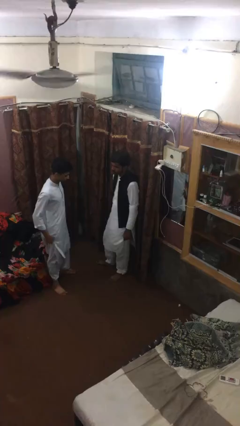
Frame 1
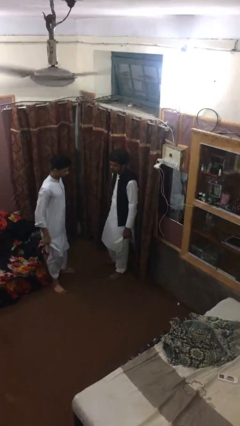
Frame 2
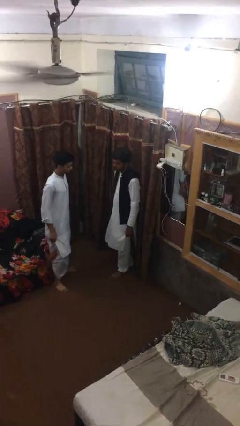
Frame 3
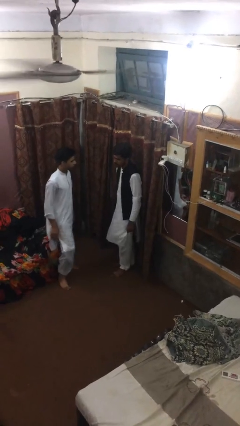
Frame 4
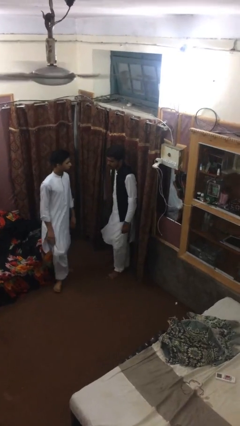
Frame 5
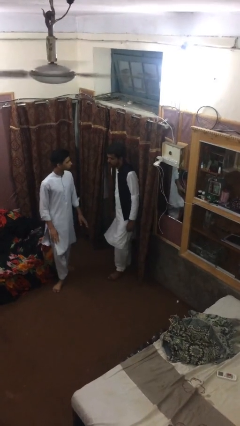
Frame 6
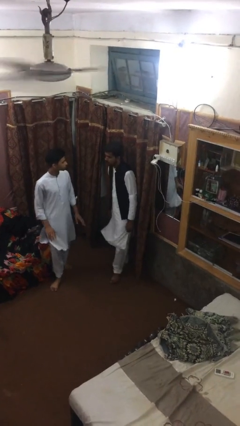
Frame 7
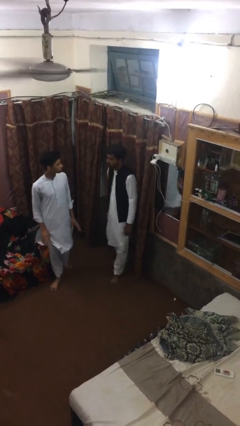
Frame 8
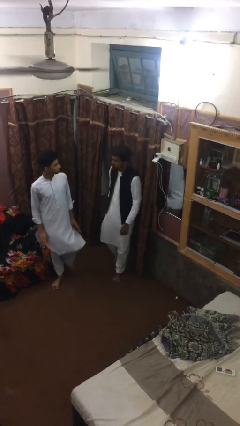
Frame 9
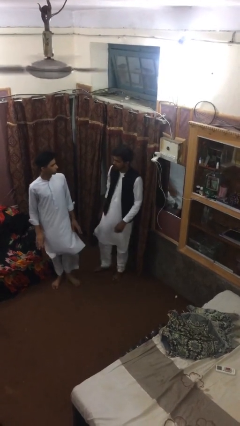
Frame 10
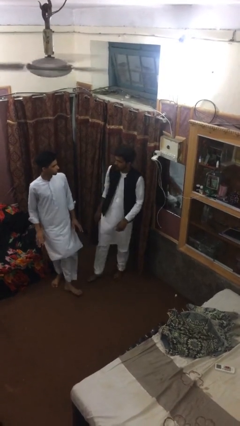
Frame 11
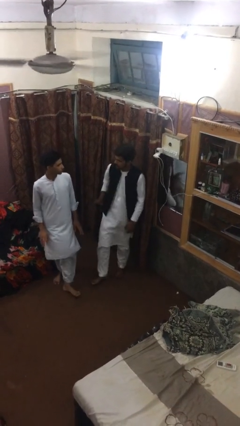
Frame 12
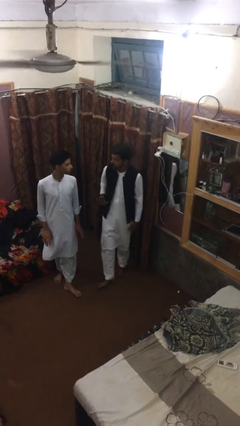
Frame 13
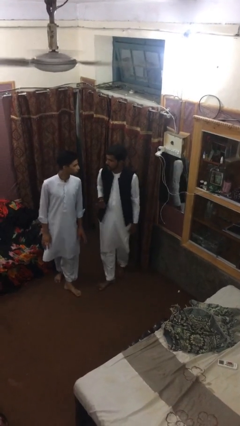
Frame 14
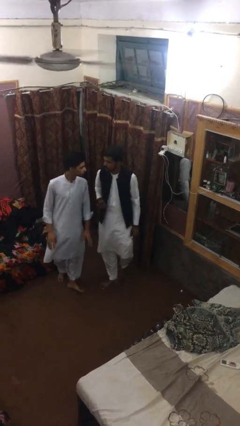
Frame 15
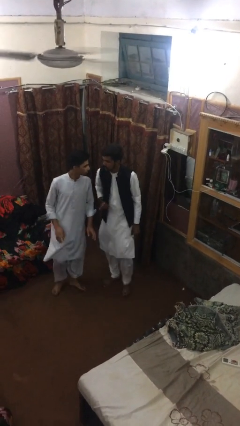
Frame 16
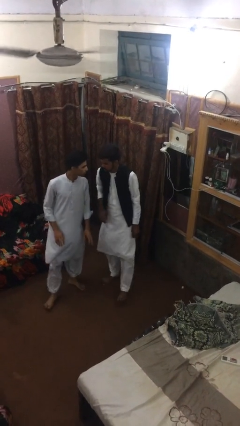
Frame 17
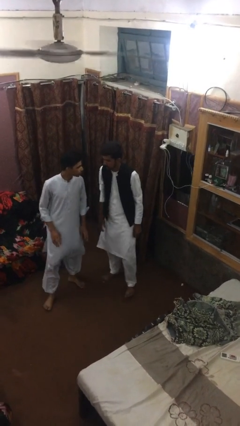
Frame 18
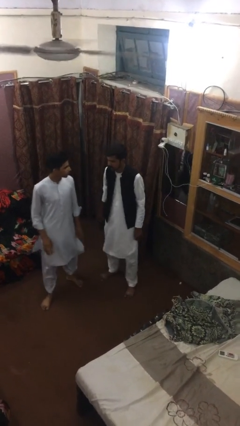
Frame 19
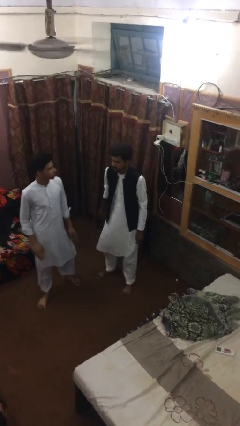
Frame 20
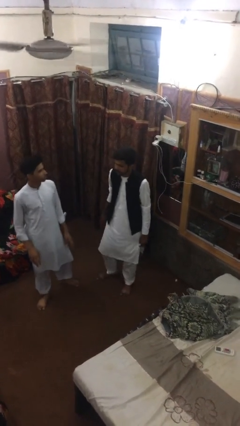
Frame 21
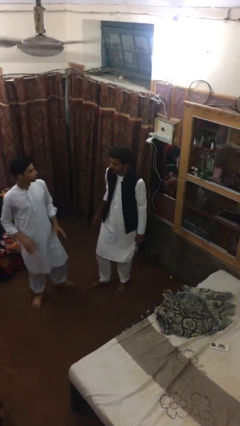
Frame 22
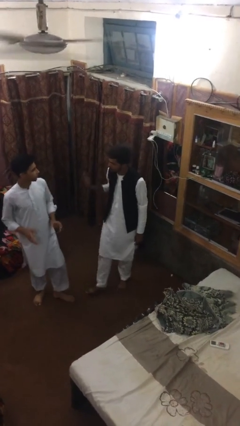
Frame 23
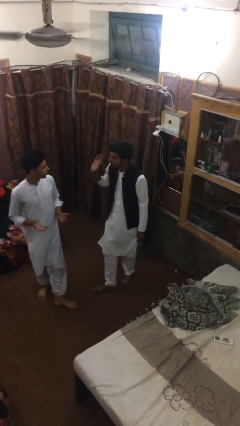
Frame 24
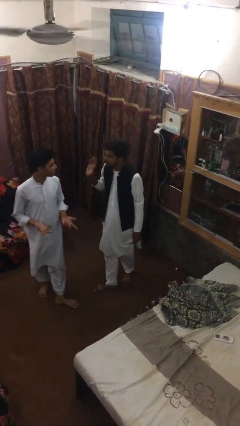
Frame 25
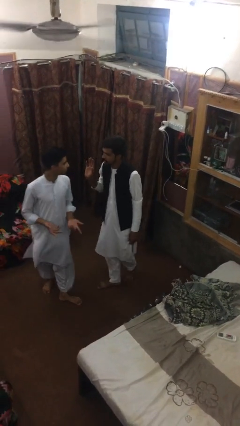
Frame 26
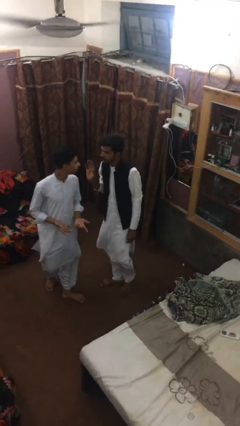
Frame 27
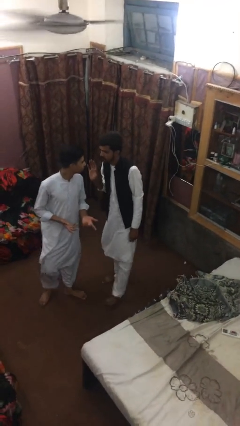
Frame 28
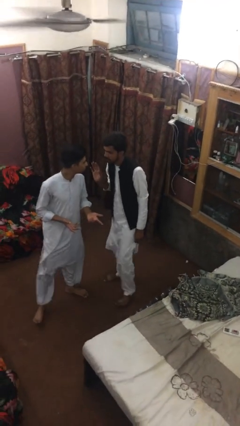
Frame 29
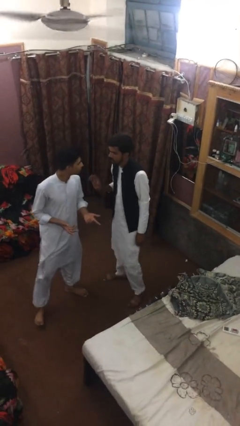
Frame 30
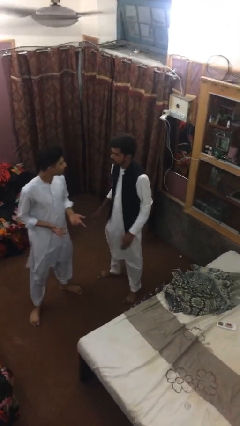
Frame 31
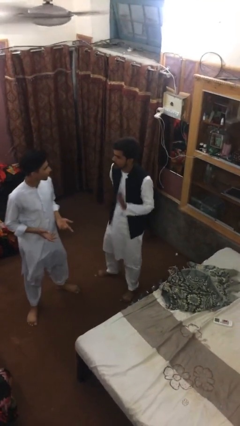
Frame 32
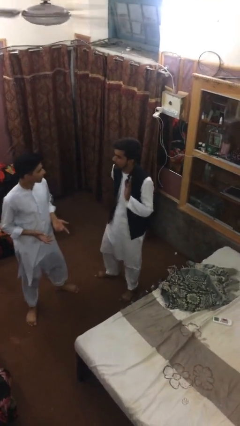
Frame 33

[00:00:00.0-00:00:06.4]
person talks to person

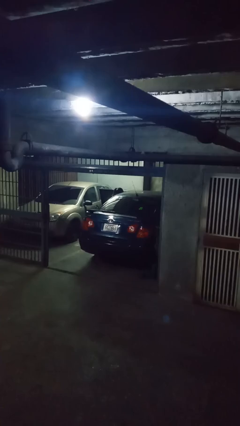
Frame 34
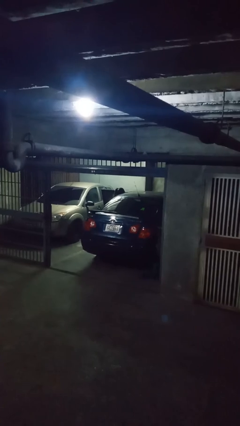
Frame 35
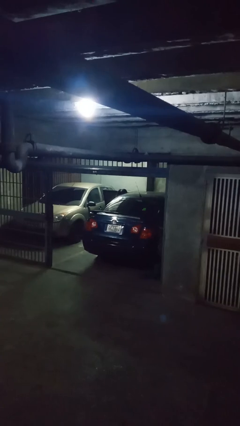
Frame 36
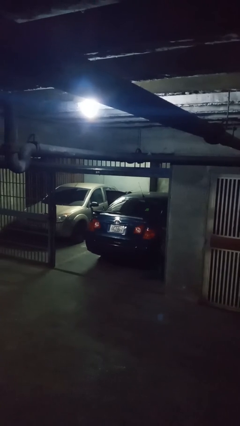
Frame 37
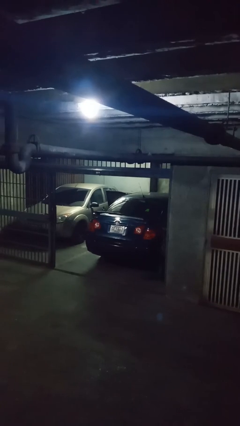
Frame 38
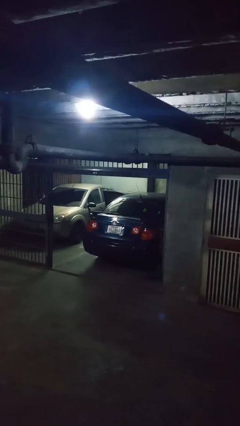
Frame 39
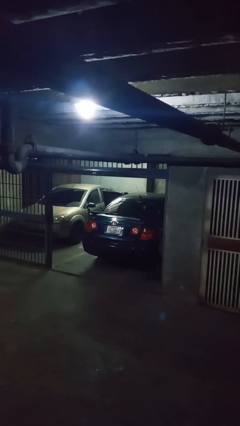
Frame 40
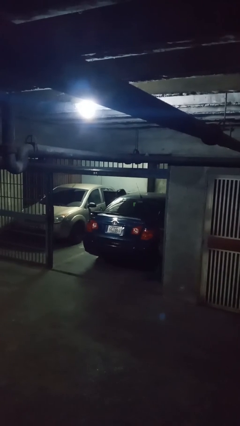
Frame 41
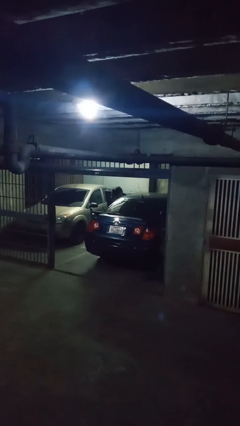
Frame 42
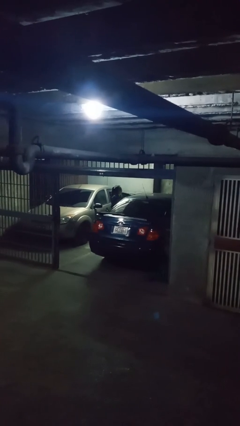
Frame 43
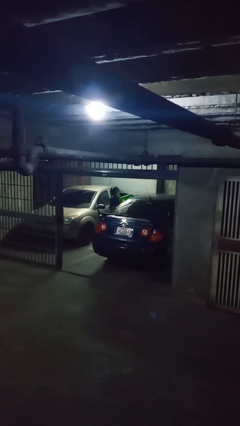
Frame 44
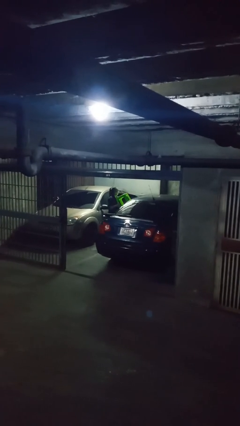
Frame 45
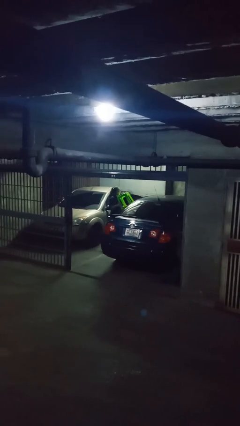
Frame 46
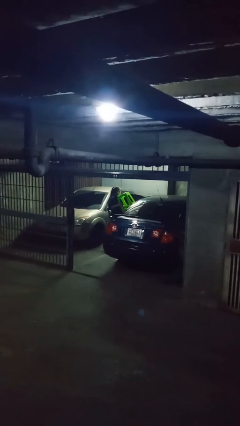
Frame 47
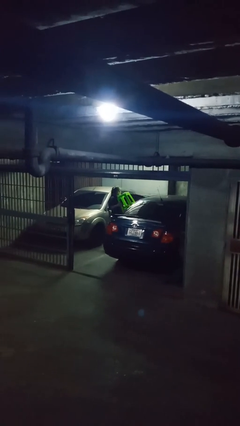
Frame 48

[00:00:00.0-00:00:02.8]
person unloads car

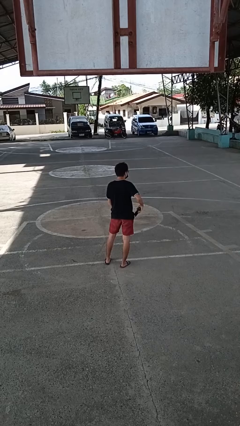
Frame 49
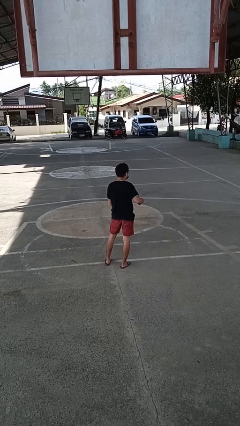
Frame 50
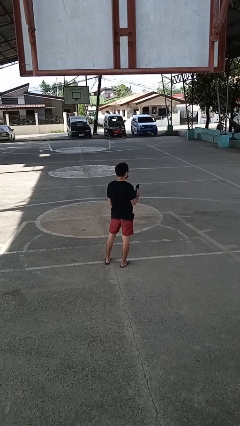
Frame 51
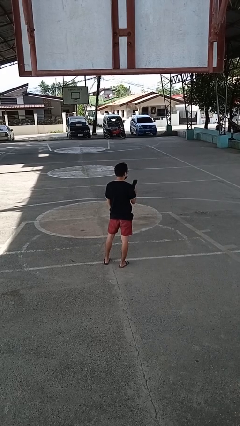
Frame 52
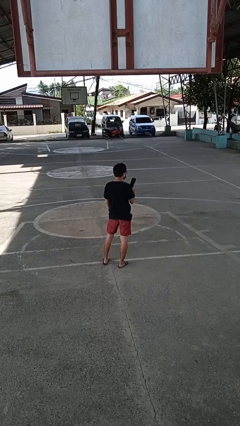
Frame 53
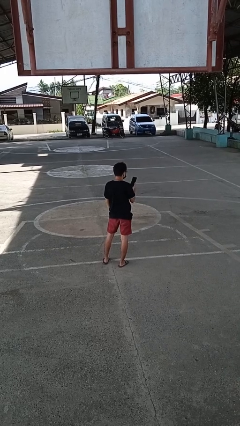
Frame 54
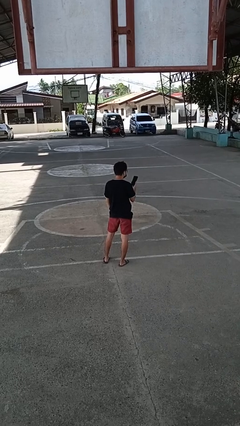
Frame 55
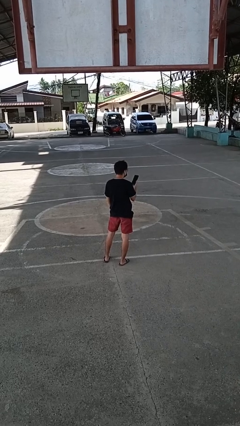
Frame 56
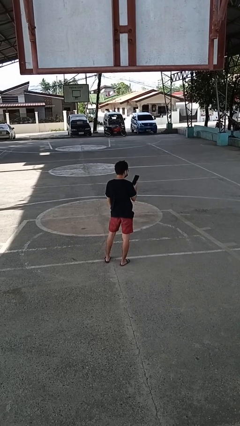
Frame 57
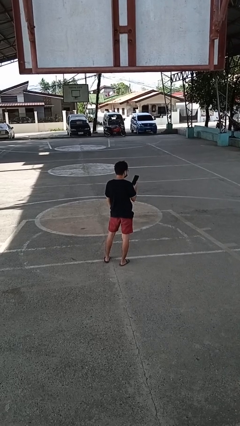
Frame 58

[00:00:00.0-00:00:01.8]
person takes phone from pocket

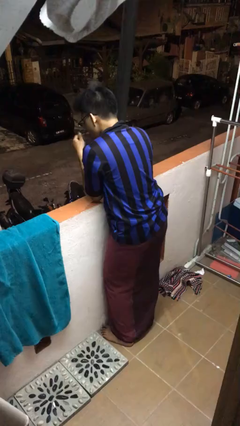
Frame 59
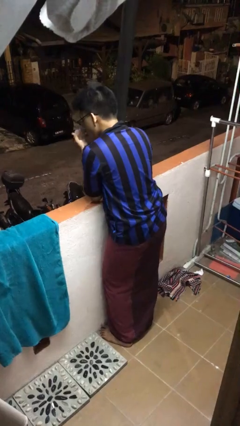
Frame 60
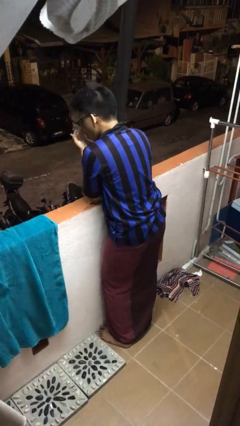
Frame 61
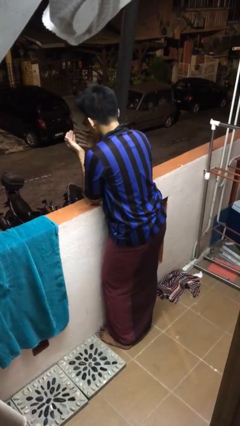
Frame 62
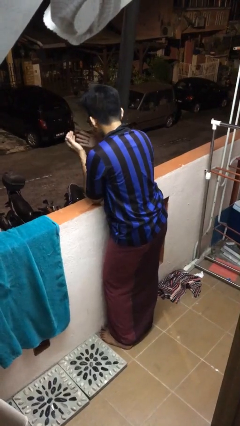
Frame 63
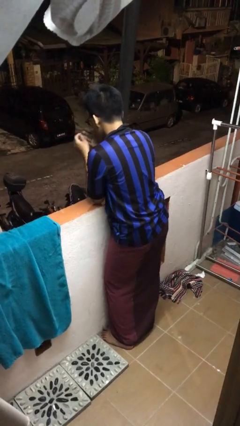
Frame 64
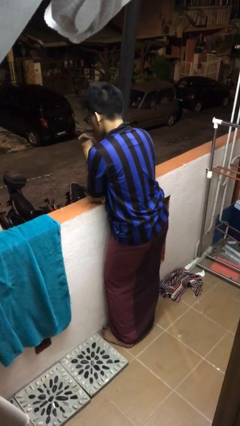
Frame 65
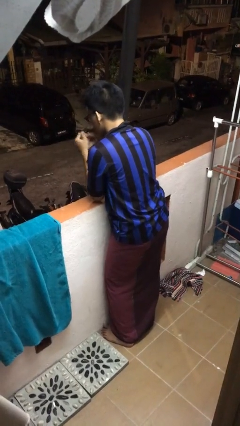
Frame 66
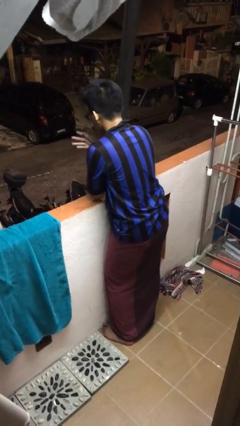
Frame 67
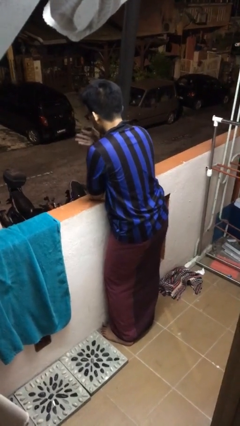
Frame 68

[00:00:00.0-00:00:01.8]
person blows into hands

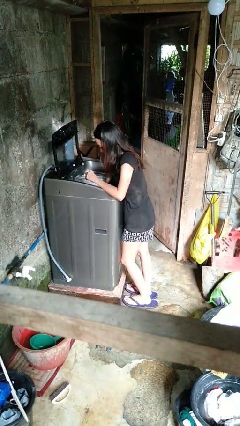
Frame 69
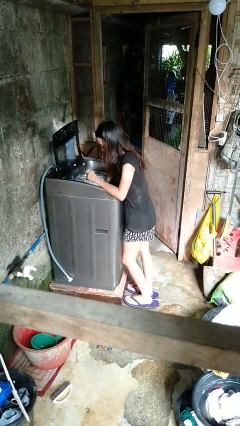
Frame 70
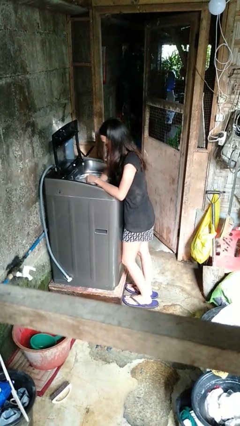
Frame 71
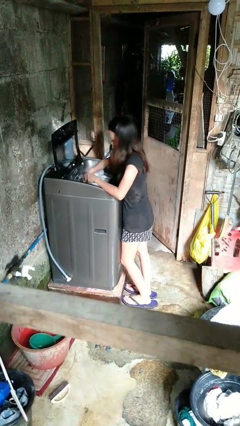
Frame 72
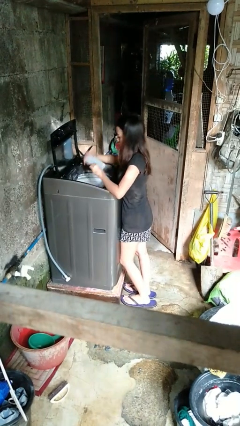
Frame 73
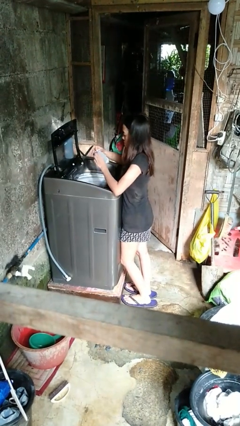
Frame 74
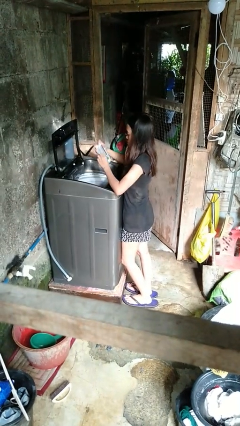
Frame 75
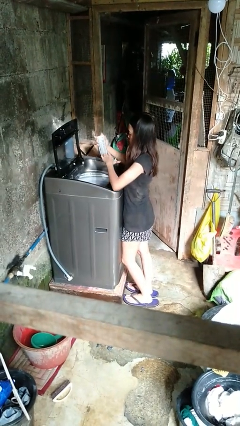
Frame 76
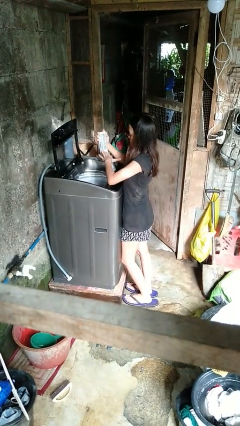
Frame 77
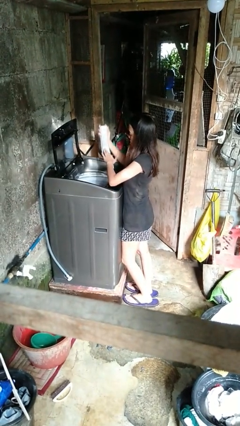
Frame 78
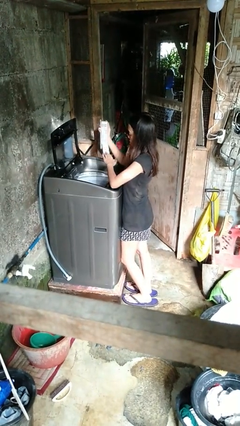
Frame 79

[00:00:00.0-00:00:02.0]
person cleans dryer lint trap

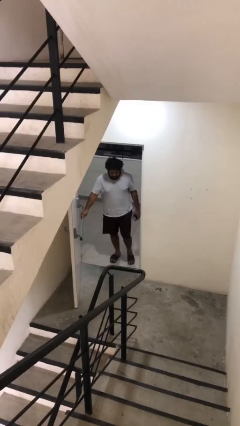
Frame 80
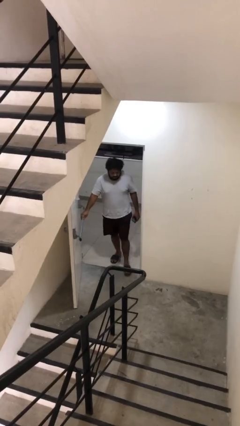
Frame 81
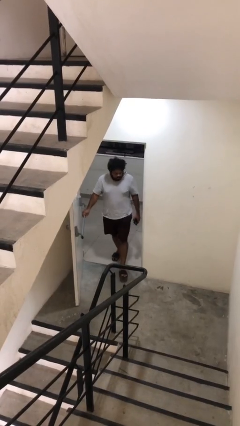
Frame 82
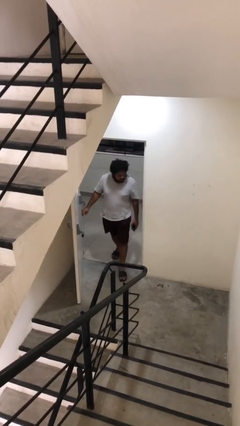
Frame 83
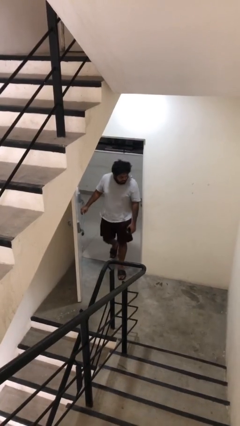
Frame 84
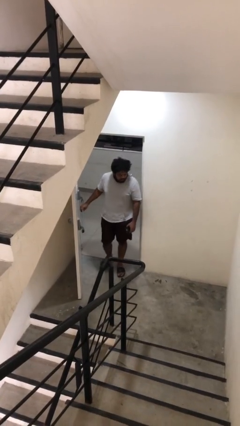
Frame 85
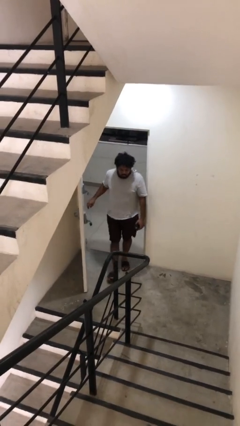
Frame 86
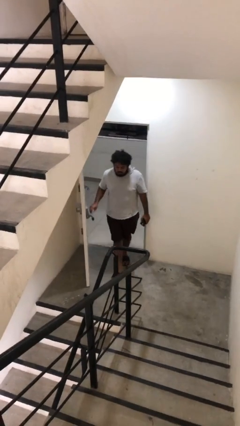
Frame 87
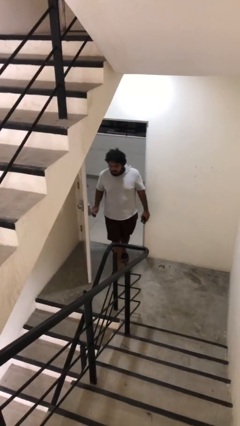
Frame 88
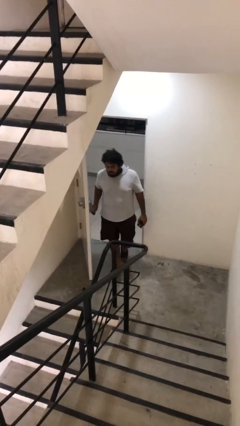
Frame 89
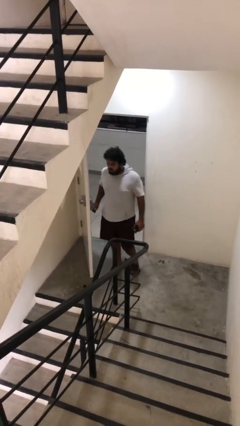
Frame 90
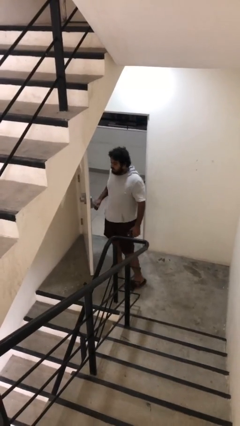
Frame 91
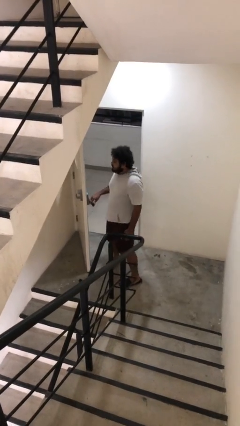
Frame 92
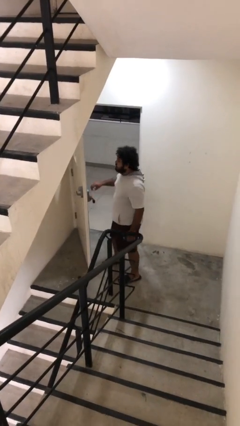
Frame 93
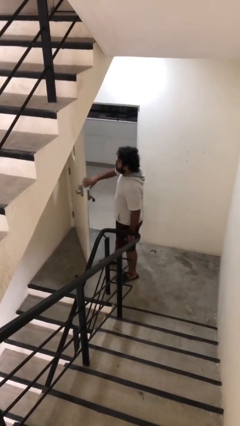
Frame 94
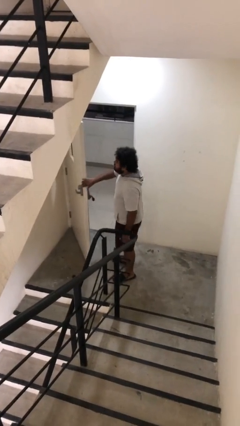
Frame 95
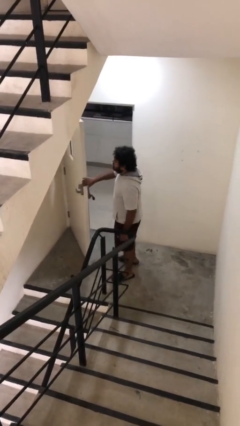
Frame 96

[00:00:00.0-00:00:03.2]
person enters scene through structure
